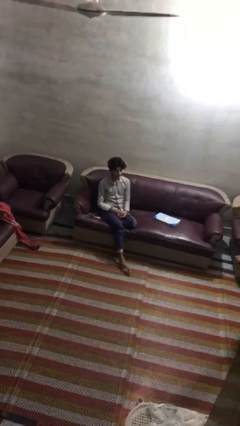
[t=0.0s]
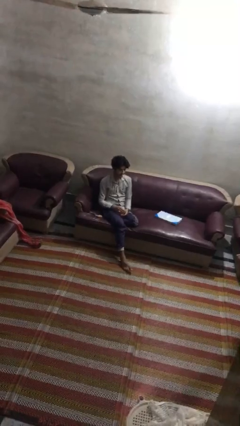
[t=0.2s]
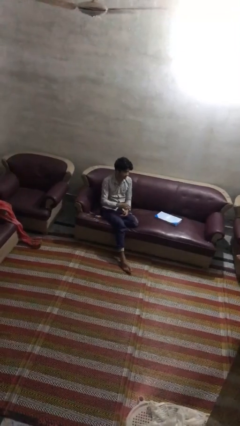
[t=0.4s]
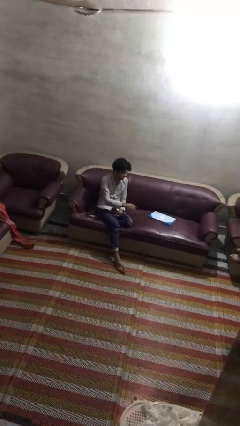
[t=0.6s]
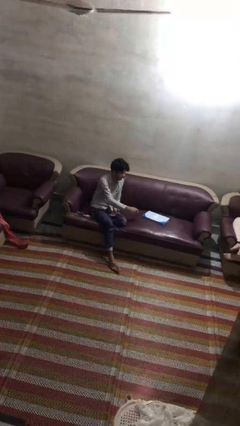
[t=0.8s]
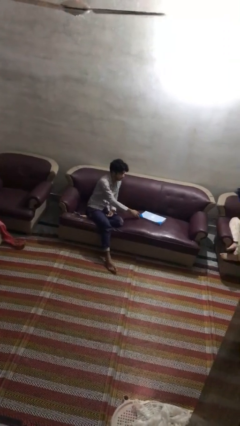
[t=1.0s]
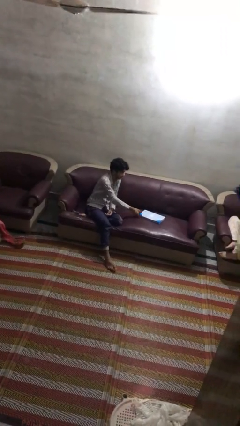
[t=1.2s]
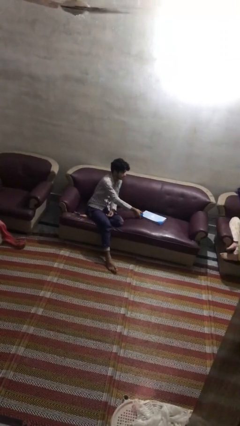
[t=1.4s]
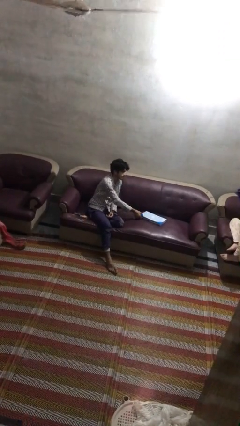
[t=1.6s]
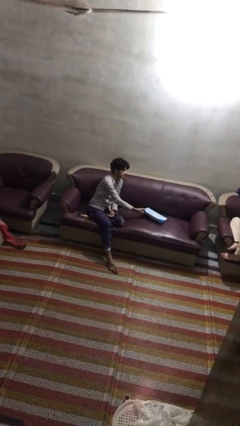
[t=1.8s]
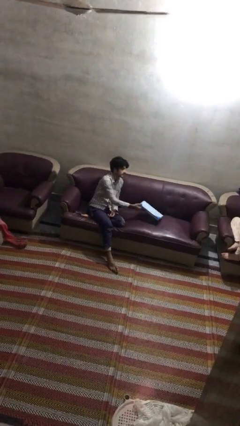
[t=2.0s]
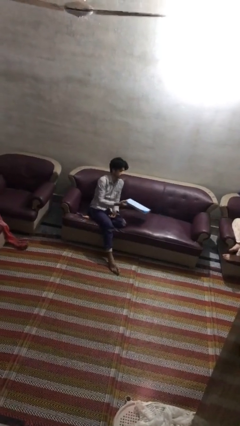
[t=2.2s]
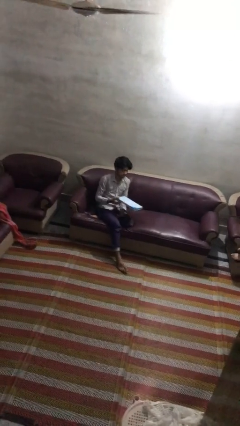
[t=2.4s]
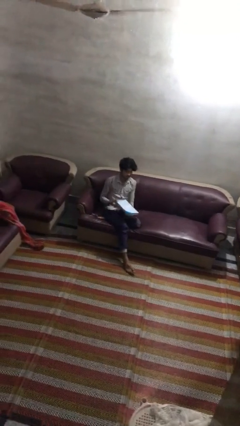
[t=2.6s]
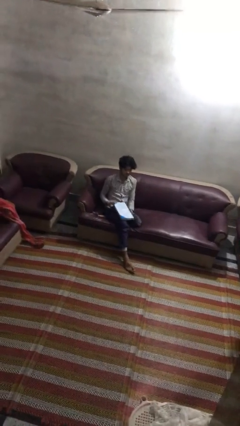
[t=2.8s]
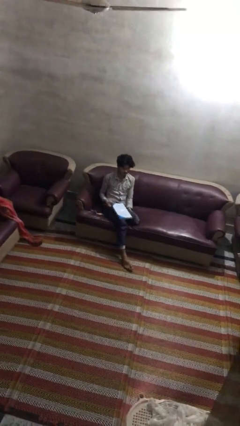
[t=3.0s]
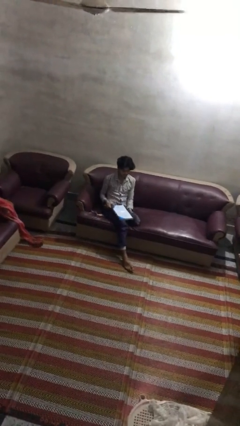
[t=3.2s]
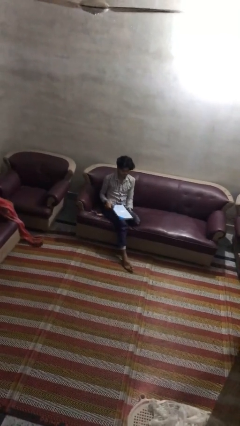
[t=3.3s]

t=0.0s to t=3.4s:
person picks up object from couch

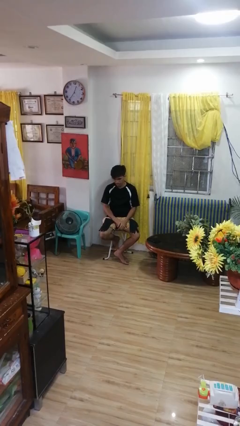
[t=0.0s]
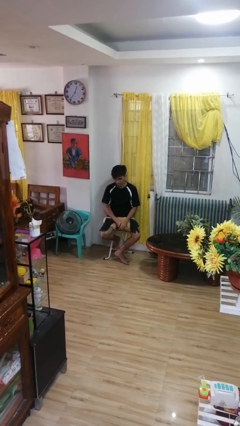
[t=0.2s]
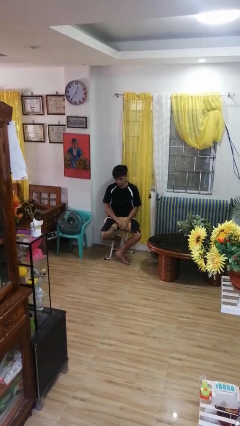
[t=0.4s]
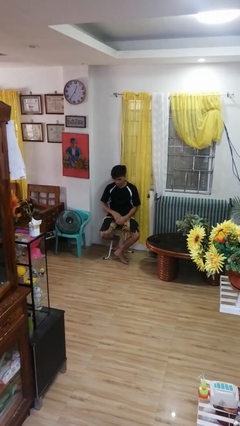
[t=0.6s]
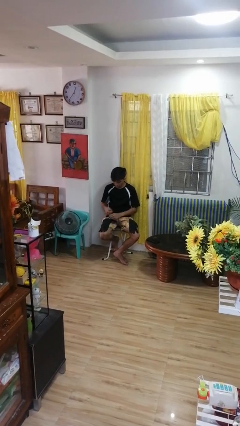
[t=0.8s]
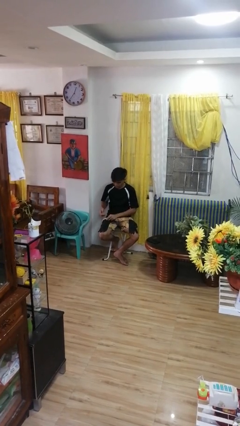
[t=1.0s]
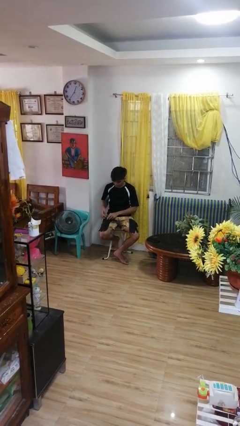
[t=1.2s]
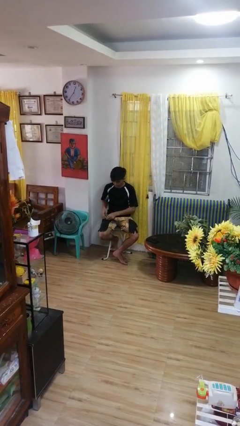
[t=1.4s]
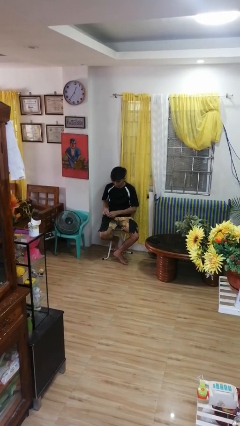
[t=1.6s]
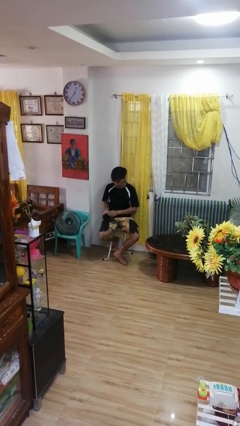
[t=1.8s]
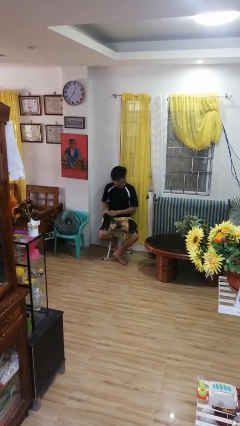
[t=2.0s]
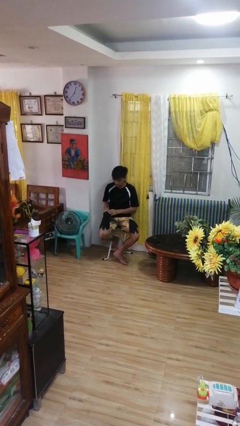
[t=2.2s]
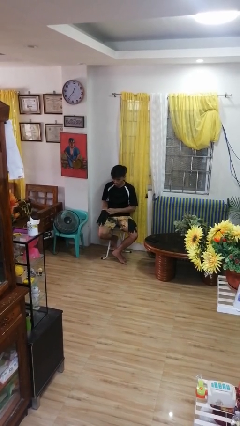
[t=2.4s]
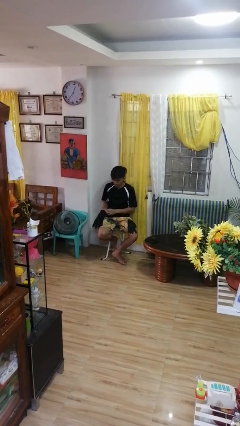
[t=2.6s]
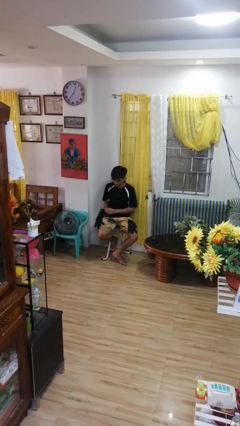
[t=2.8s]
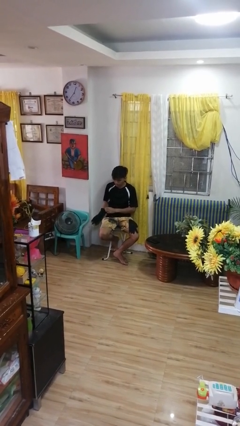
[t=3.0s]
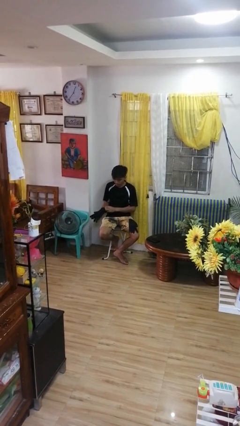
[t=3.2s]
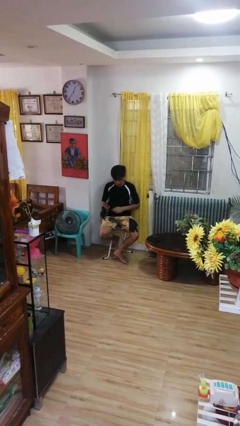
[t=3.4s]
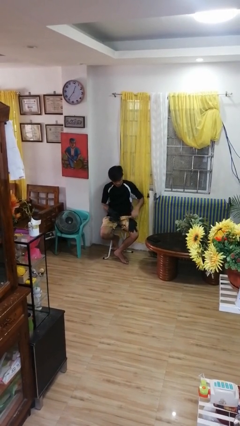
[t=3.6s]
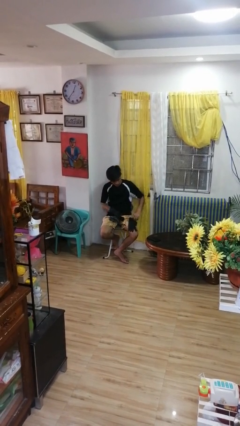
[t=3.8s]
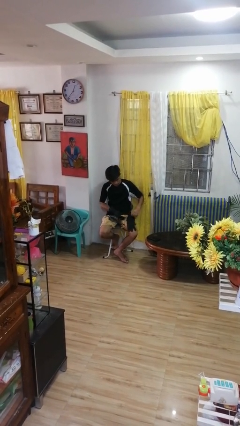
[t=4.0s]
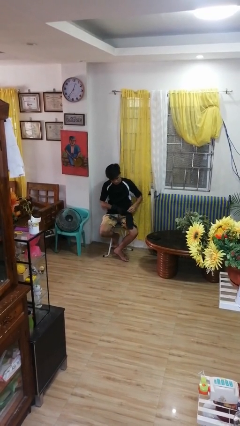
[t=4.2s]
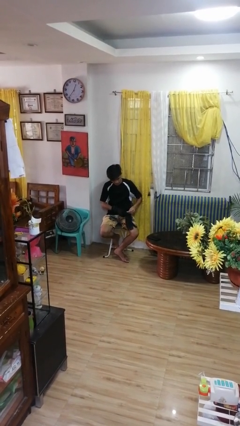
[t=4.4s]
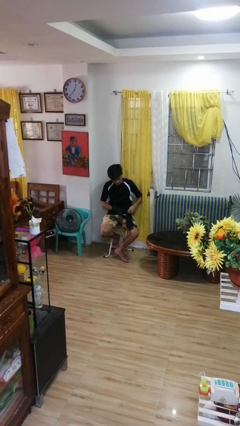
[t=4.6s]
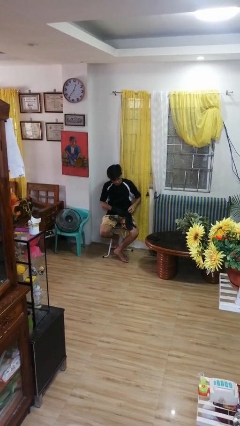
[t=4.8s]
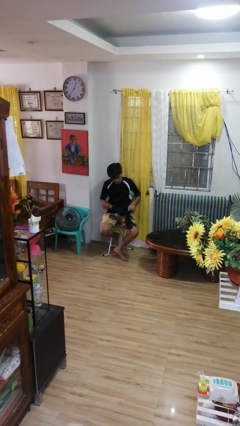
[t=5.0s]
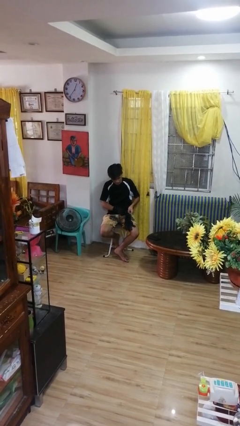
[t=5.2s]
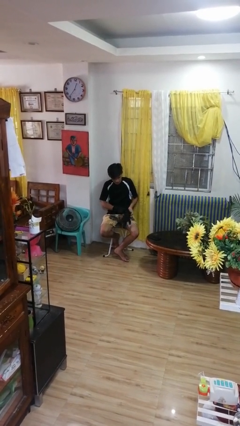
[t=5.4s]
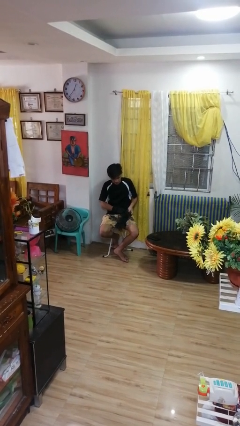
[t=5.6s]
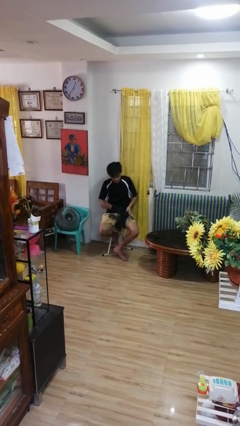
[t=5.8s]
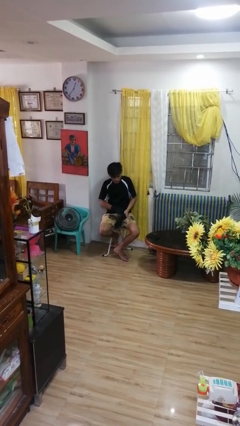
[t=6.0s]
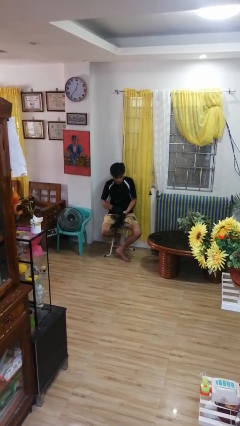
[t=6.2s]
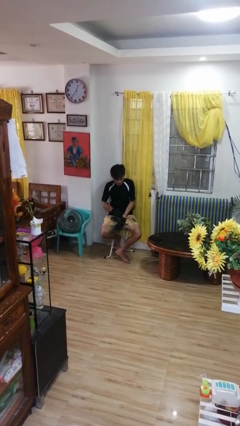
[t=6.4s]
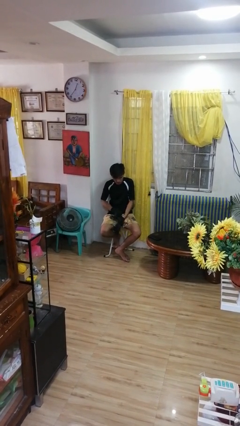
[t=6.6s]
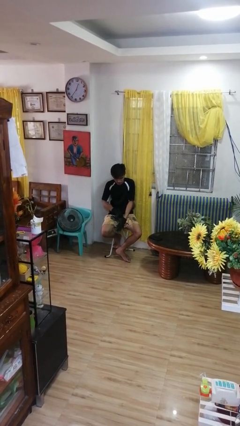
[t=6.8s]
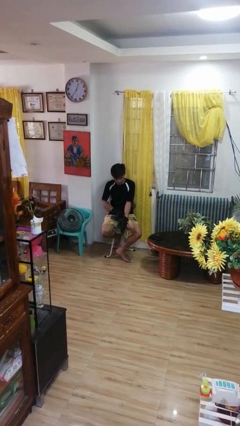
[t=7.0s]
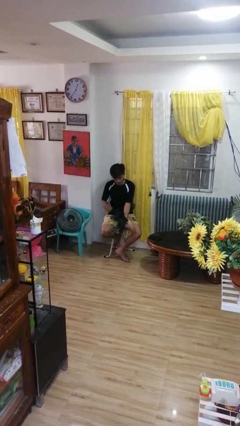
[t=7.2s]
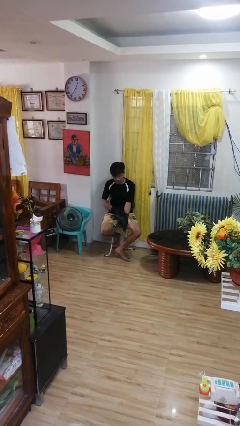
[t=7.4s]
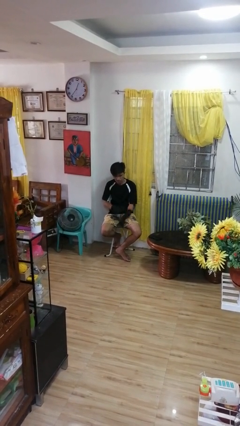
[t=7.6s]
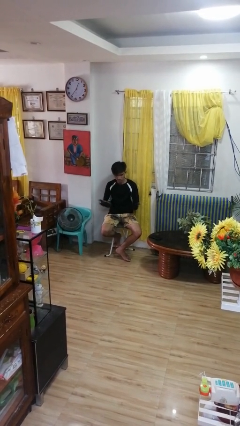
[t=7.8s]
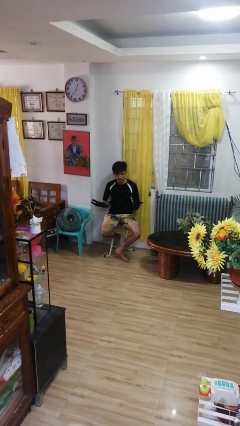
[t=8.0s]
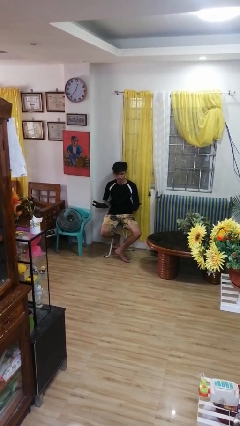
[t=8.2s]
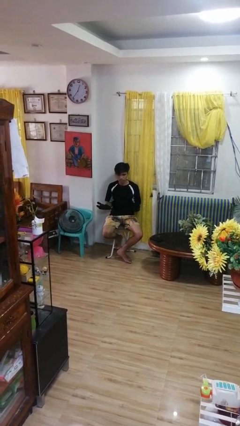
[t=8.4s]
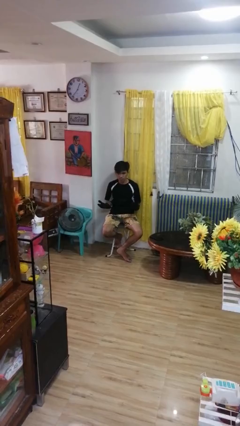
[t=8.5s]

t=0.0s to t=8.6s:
person puts on gloves

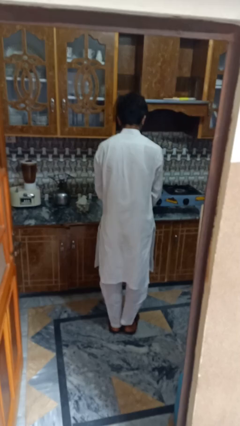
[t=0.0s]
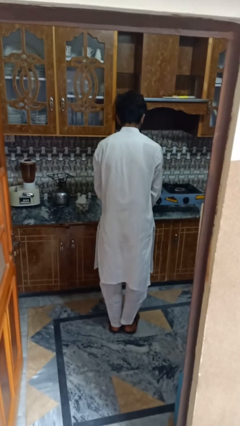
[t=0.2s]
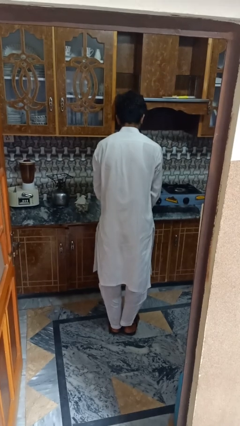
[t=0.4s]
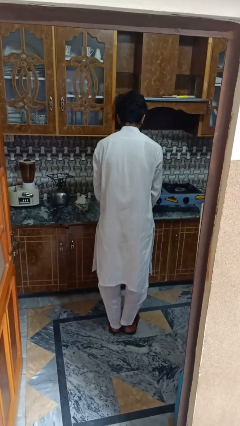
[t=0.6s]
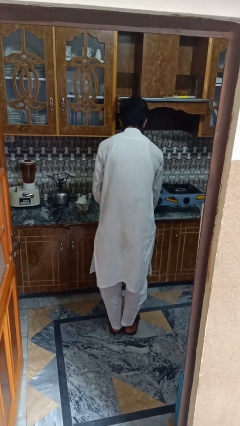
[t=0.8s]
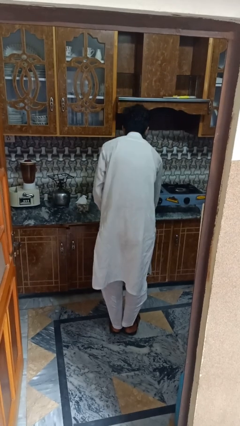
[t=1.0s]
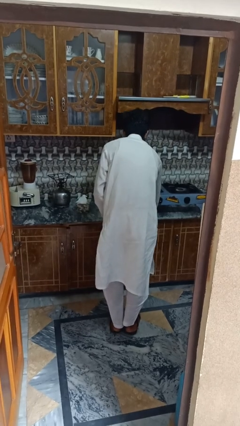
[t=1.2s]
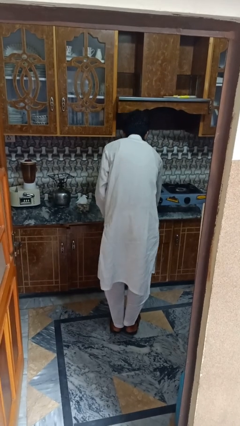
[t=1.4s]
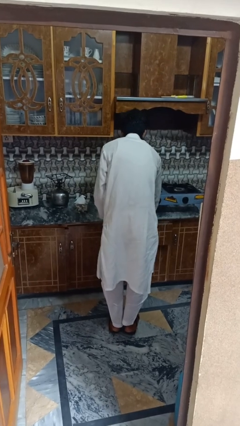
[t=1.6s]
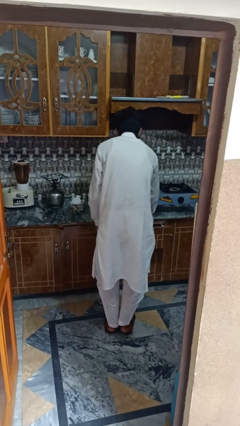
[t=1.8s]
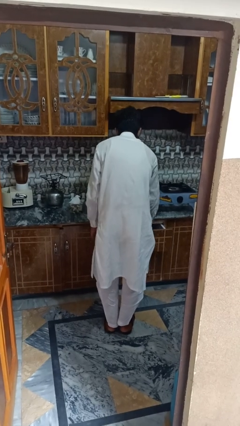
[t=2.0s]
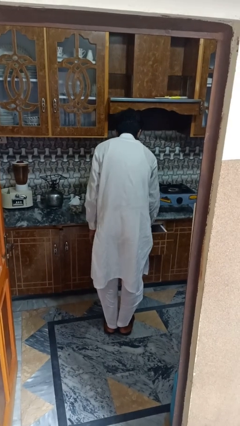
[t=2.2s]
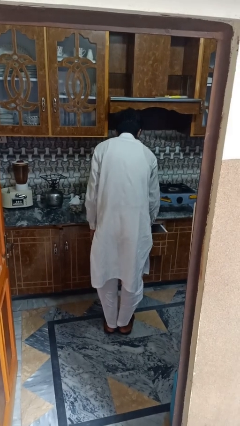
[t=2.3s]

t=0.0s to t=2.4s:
person searches in kitchen drawer

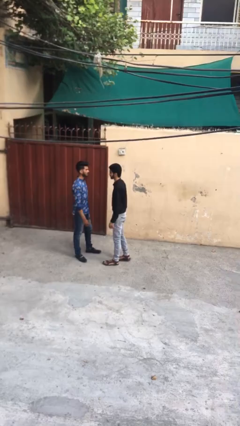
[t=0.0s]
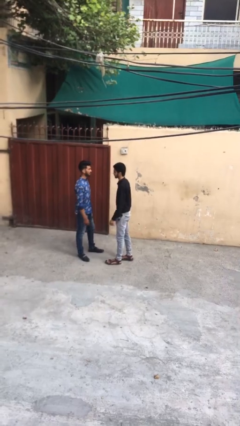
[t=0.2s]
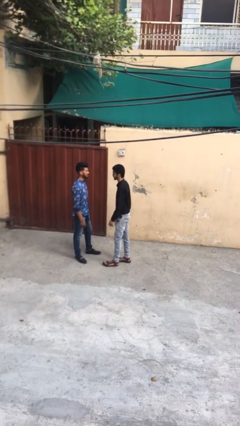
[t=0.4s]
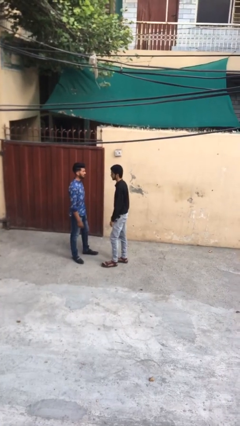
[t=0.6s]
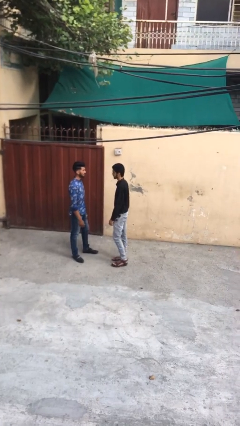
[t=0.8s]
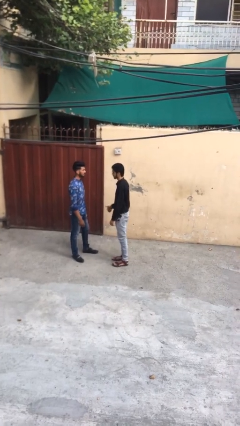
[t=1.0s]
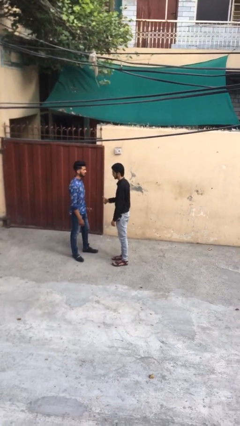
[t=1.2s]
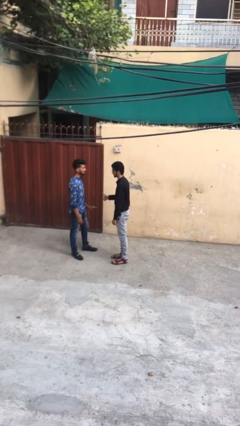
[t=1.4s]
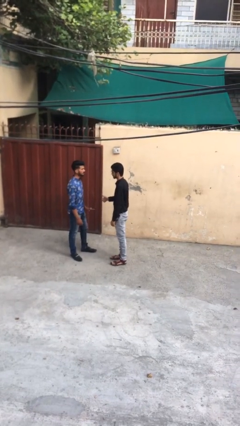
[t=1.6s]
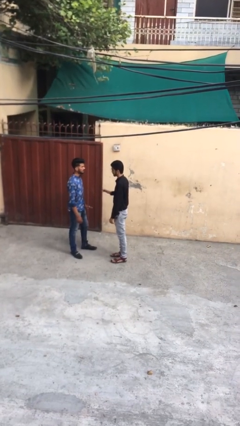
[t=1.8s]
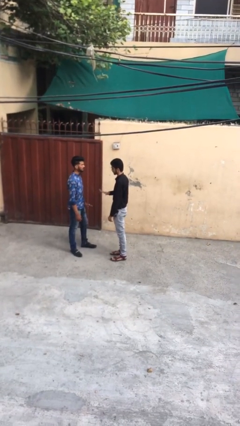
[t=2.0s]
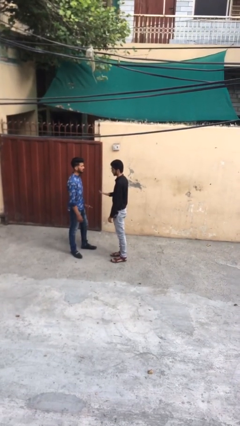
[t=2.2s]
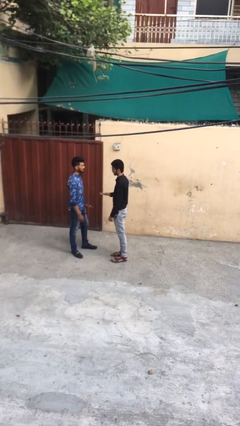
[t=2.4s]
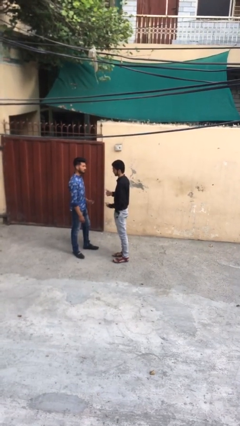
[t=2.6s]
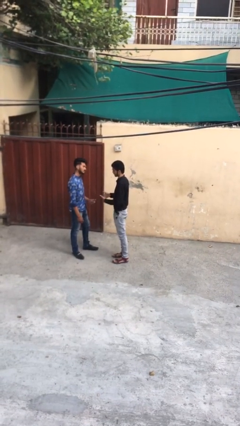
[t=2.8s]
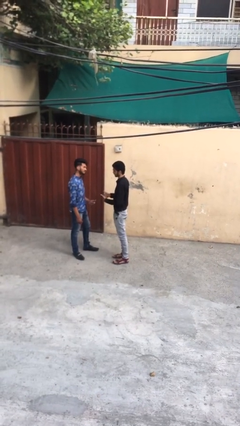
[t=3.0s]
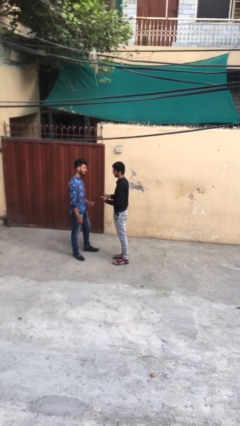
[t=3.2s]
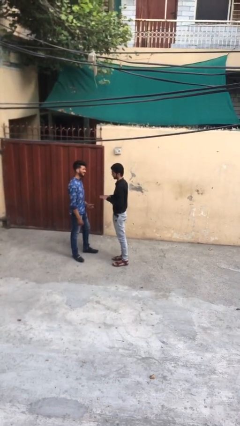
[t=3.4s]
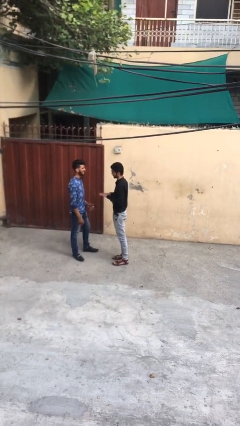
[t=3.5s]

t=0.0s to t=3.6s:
person talks to person
